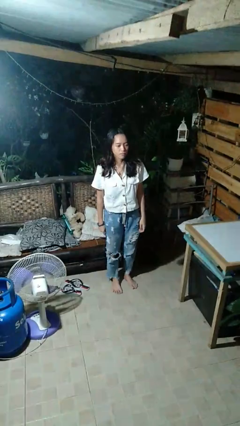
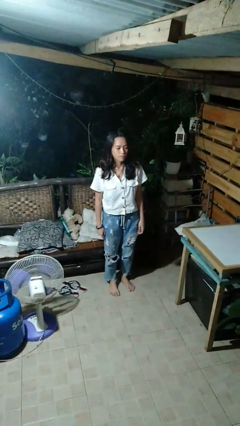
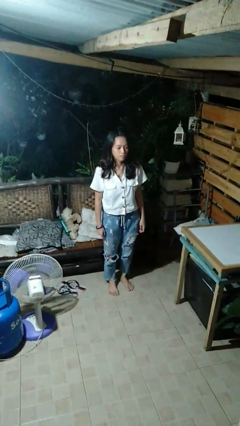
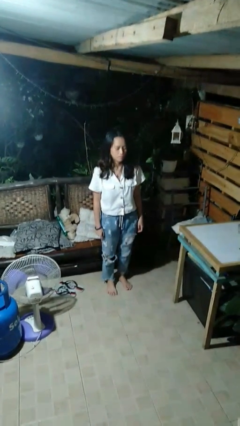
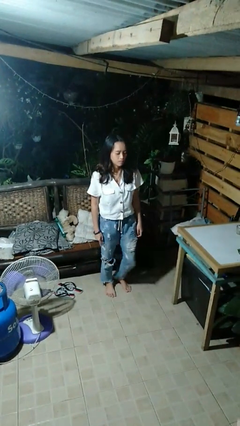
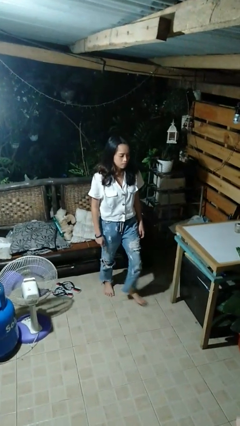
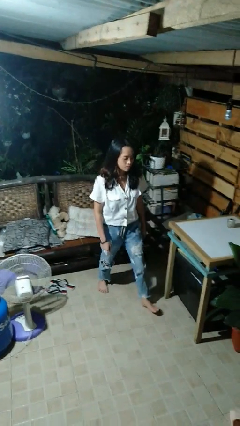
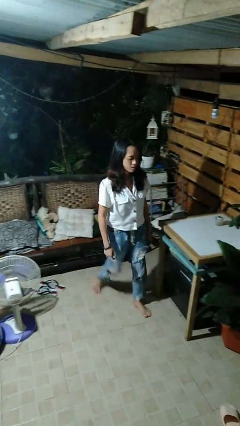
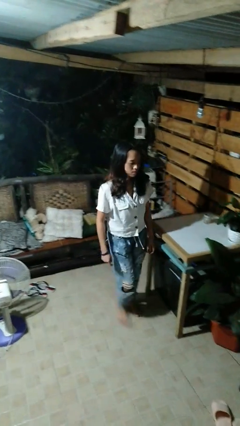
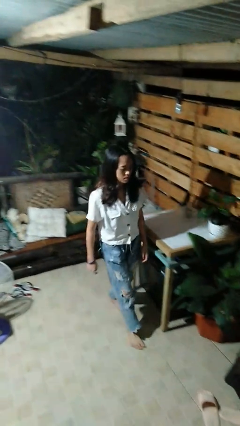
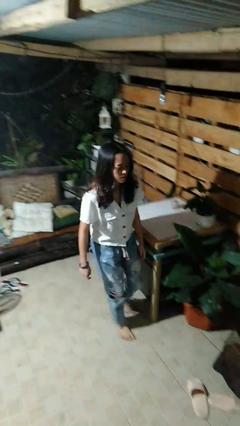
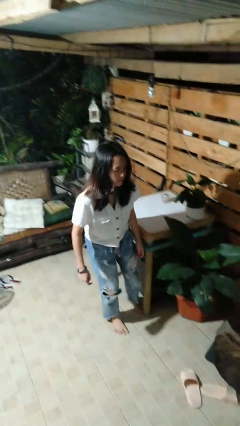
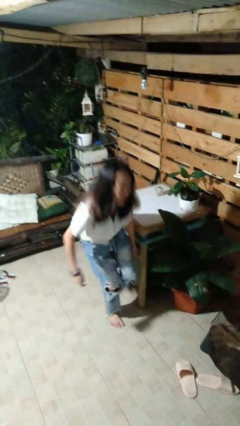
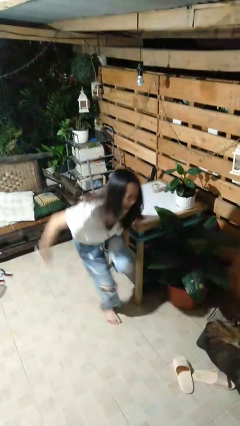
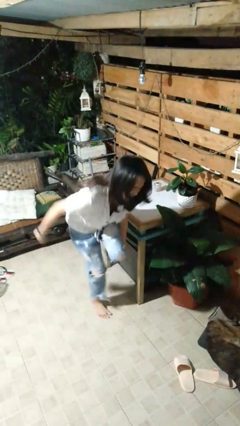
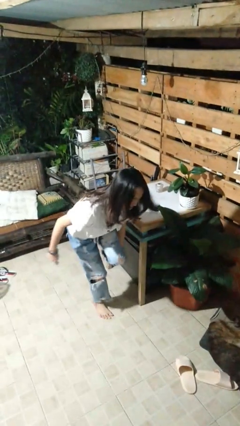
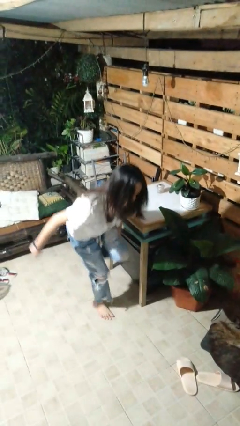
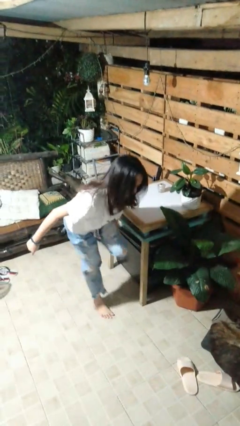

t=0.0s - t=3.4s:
person stubs toe

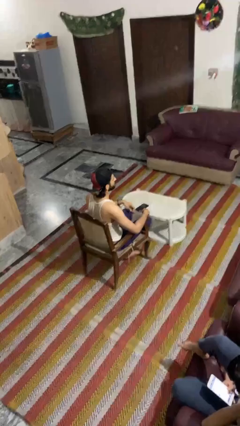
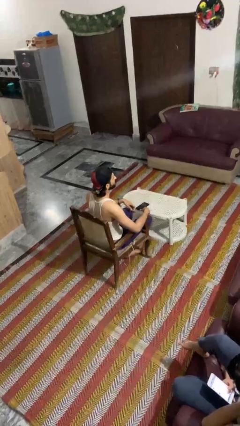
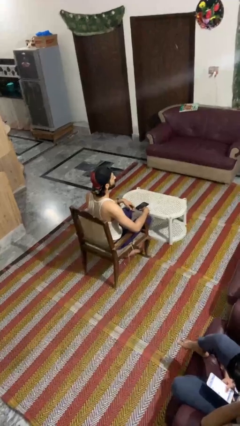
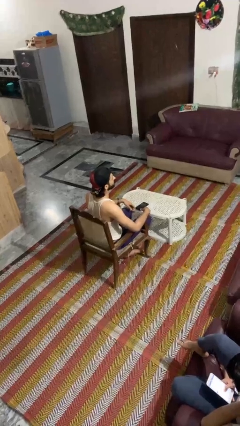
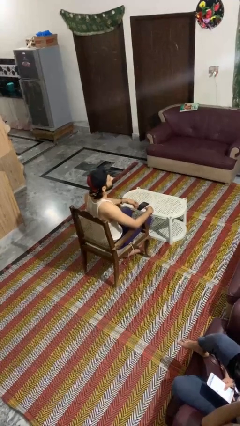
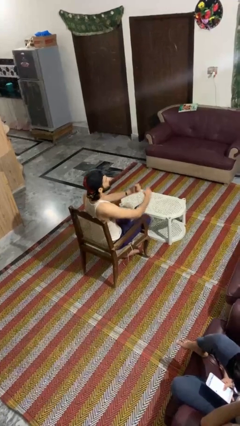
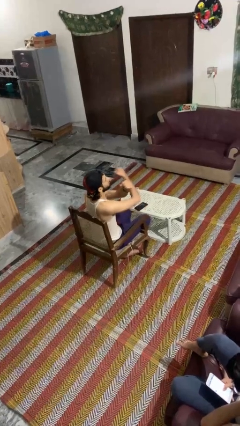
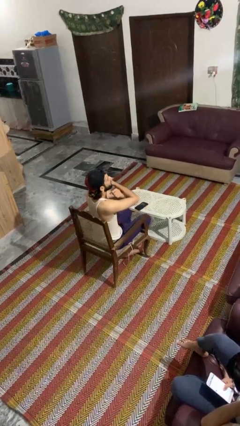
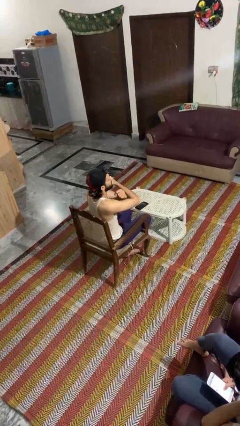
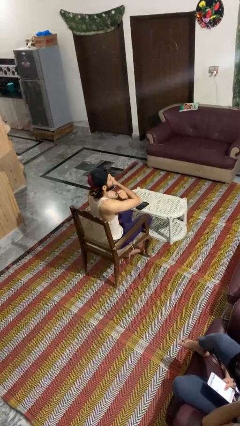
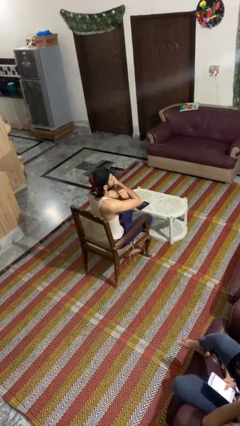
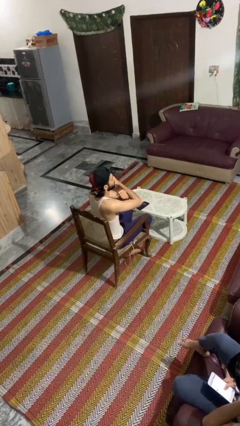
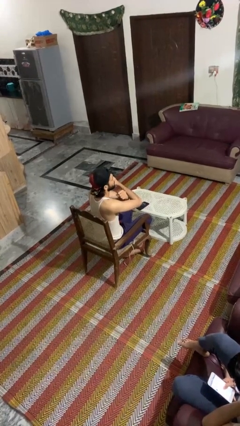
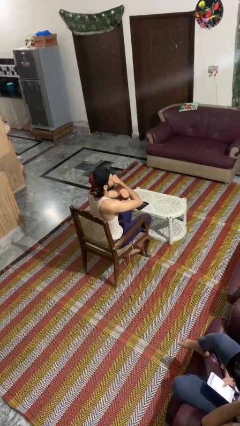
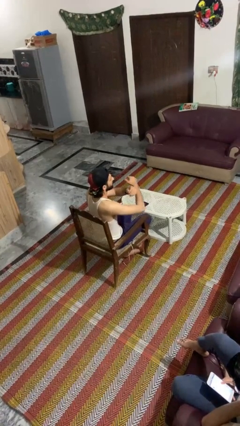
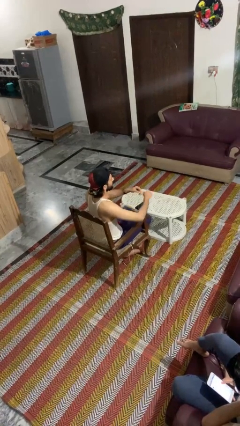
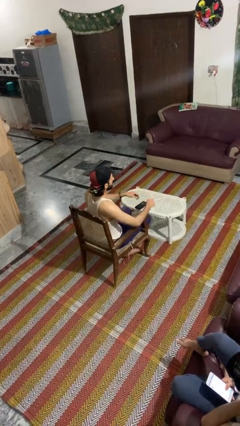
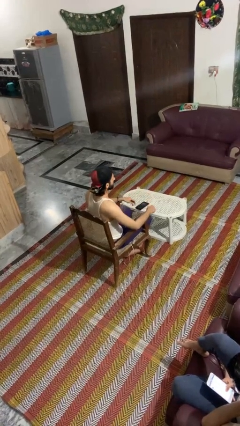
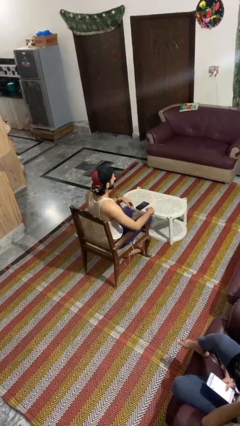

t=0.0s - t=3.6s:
person gestures arms x

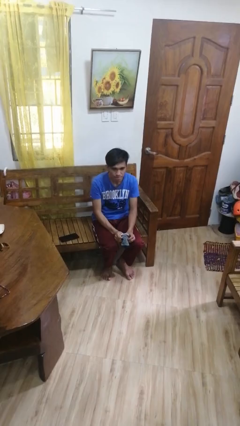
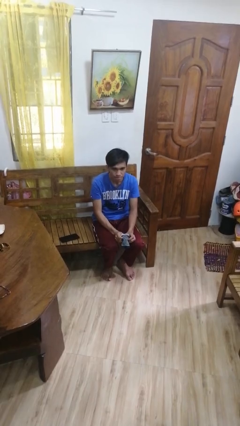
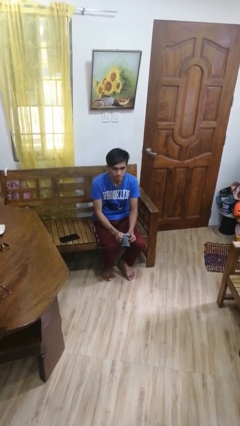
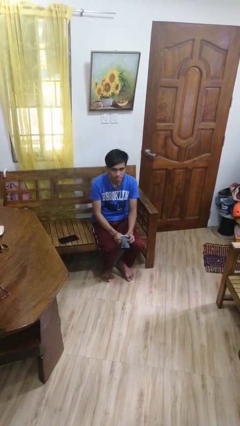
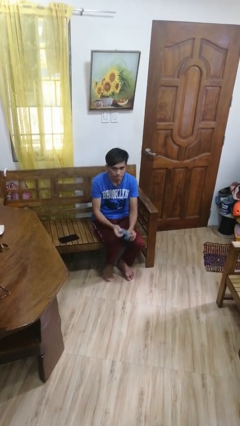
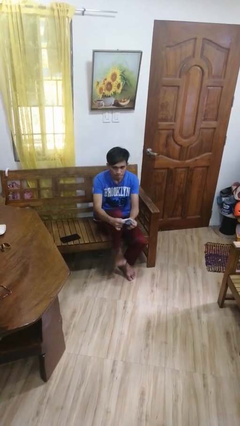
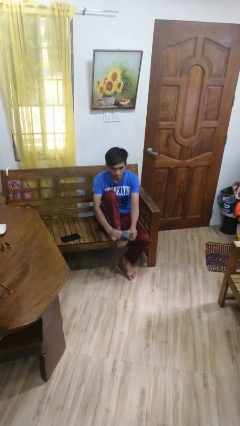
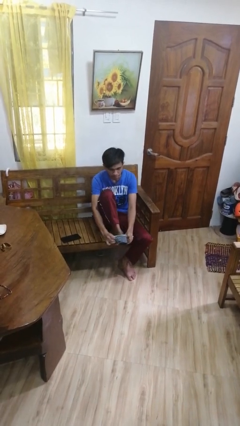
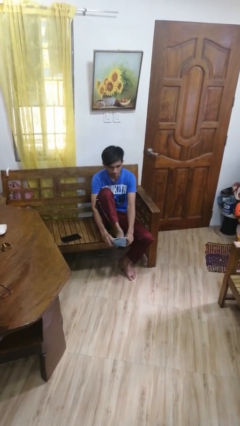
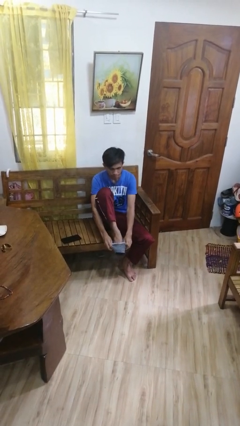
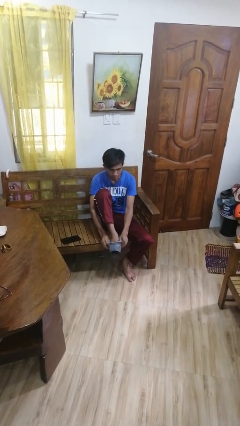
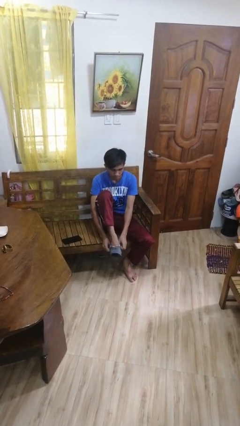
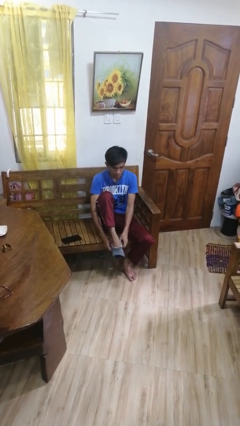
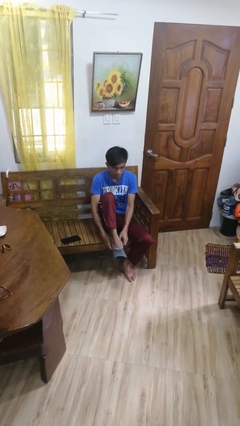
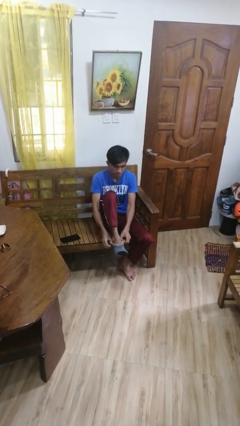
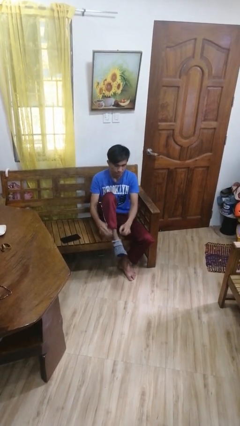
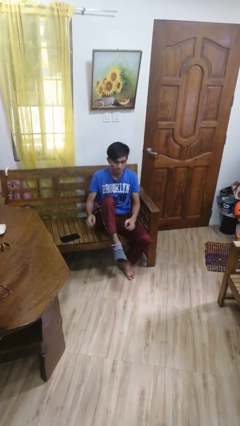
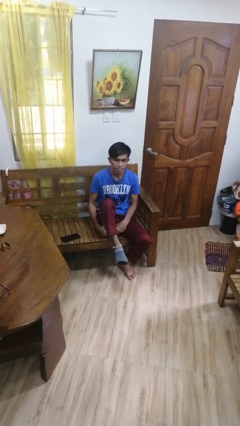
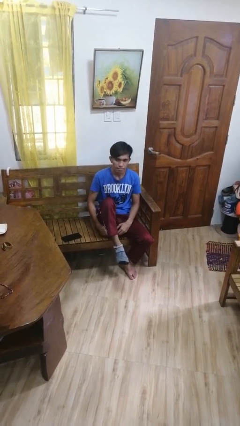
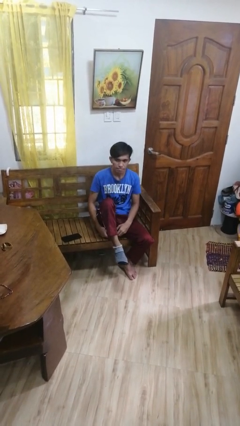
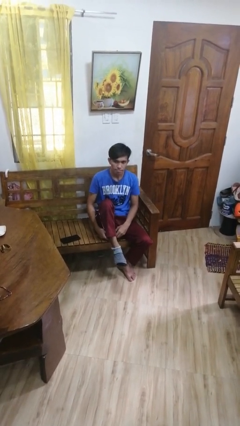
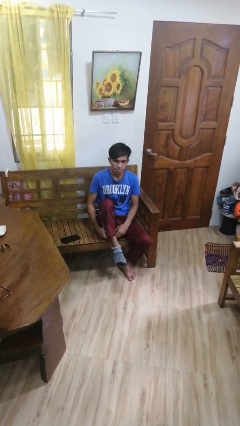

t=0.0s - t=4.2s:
person puts on socks

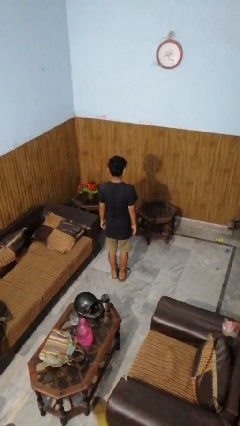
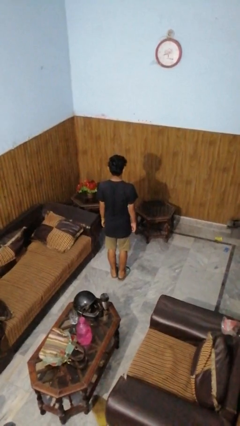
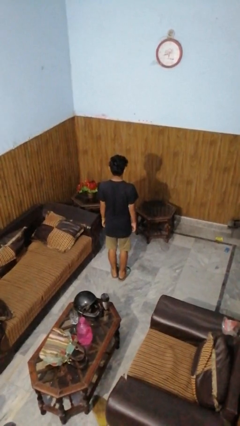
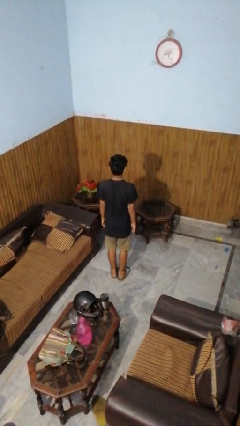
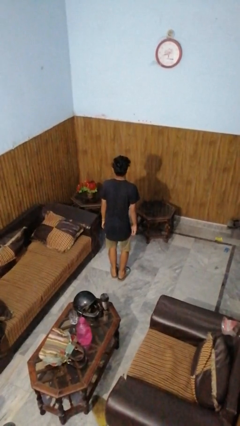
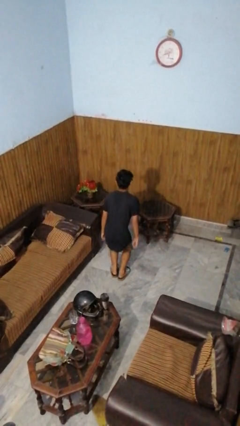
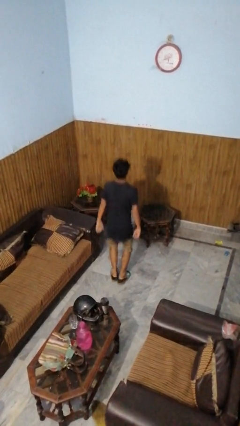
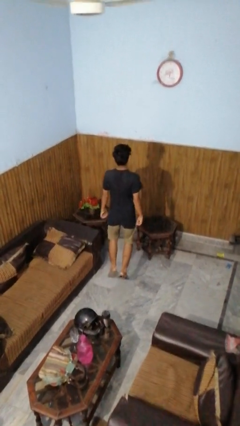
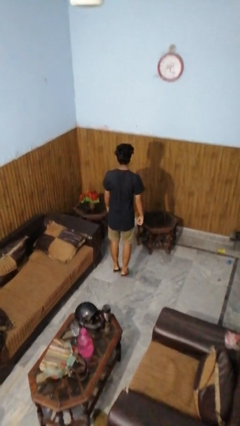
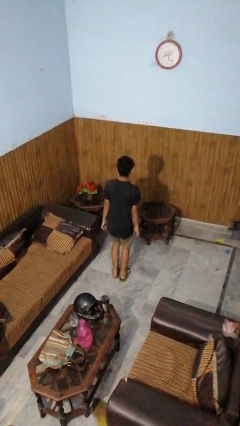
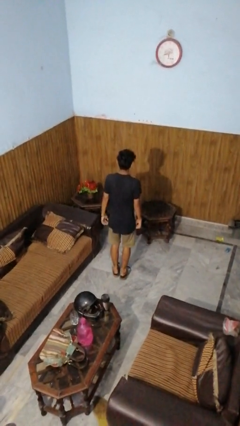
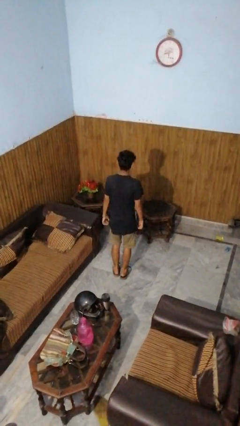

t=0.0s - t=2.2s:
person jumps

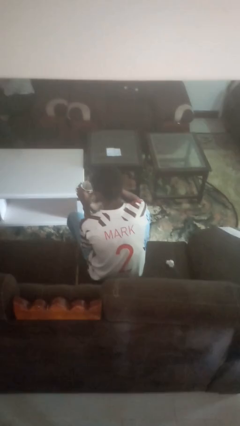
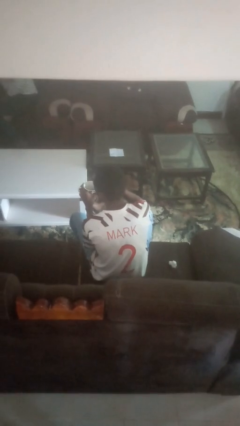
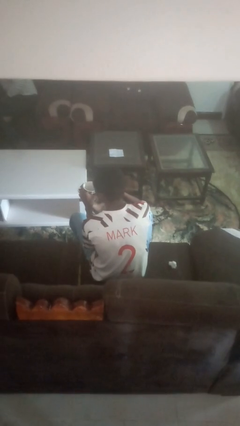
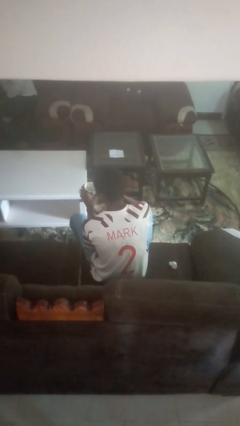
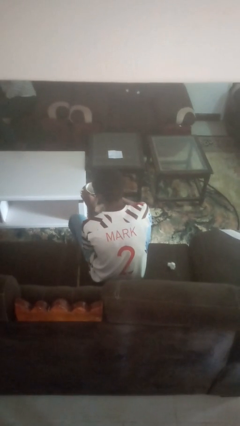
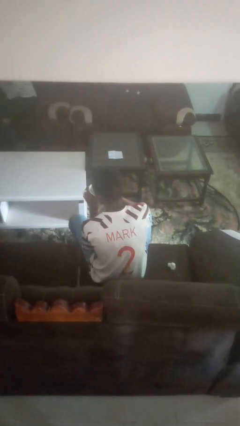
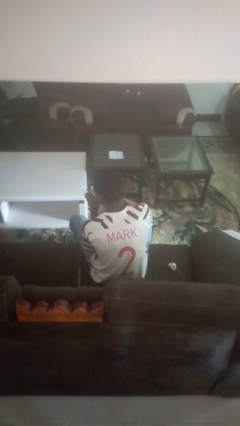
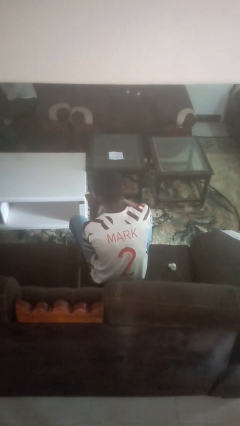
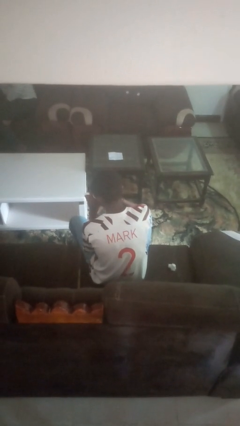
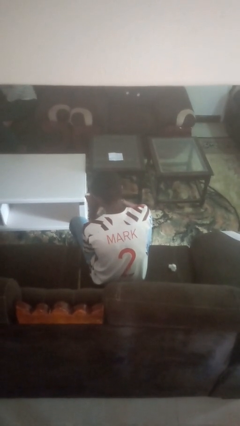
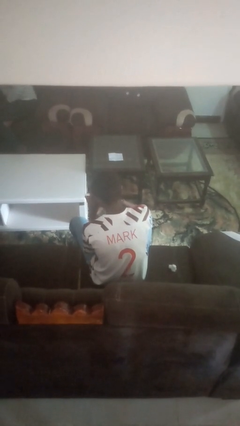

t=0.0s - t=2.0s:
person drinks from mug

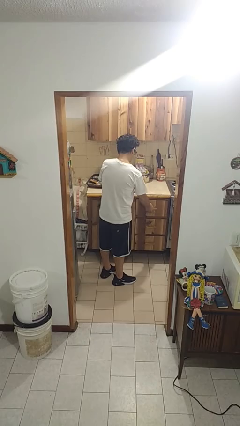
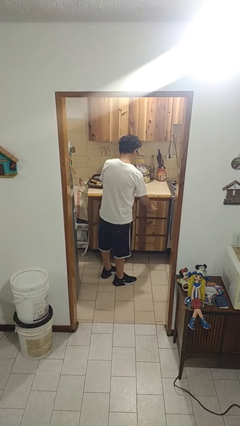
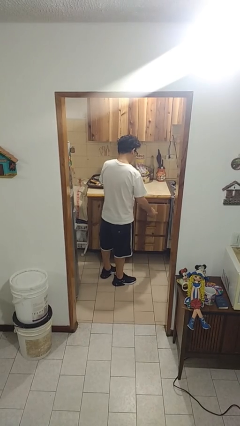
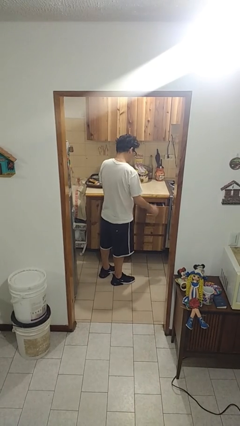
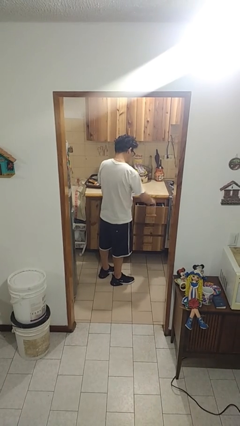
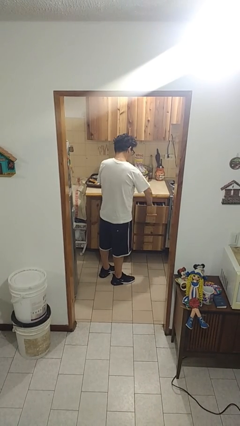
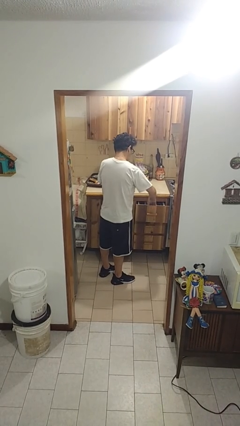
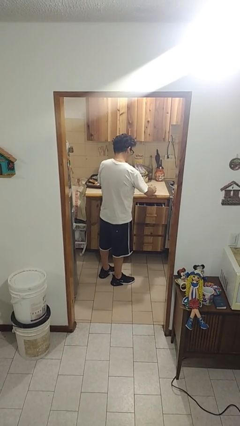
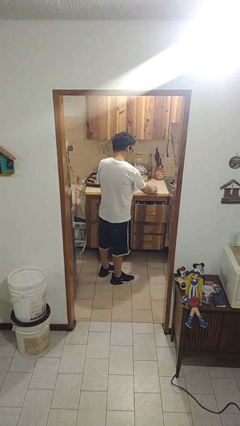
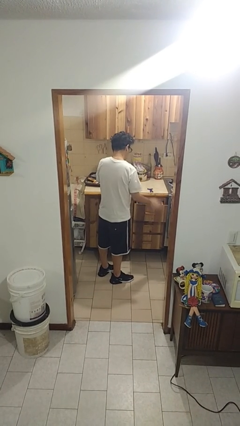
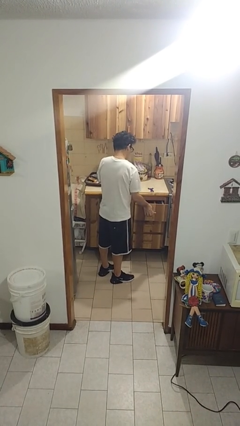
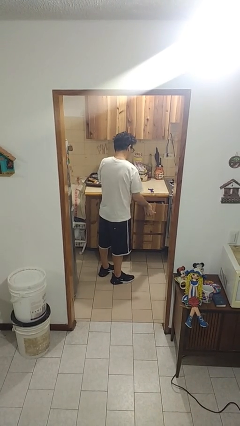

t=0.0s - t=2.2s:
person takes object from kitchen drawer
